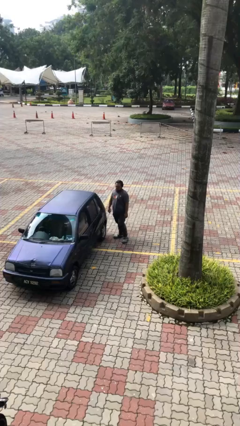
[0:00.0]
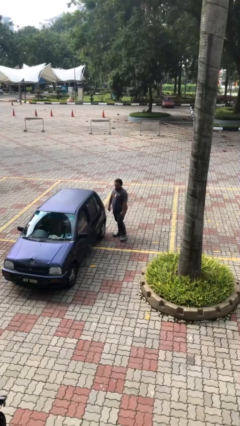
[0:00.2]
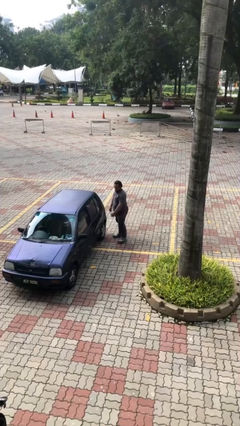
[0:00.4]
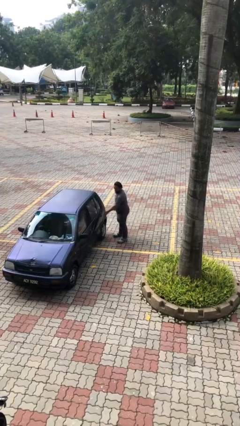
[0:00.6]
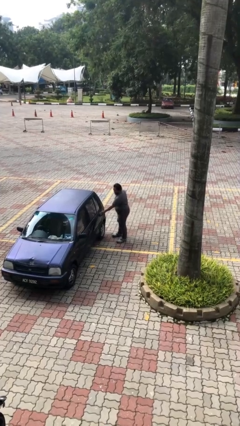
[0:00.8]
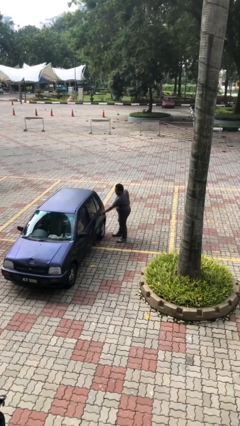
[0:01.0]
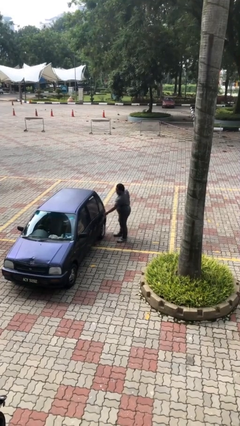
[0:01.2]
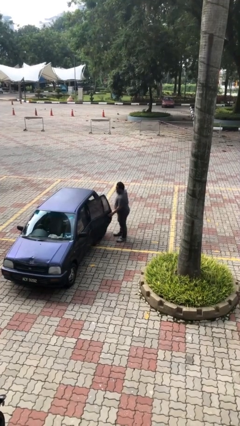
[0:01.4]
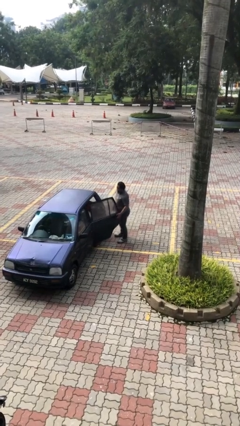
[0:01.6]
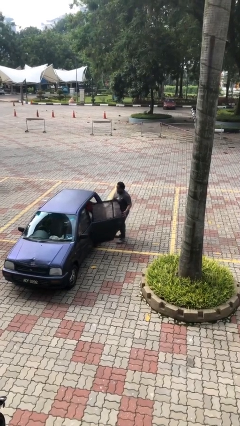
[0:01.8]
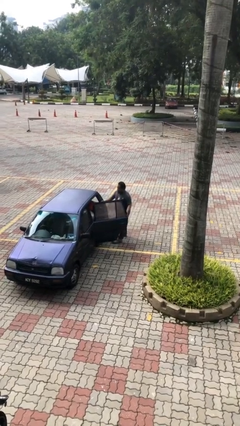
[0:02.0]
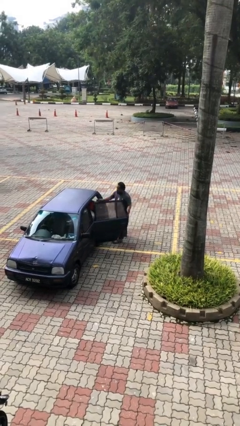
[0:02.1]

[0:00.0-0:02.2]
person opens car door

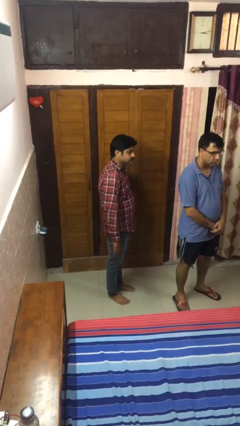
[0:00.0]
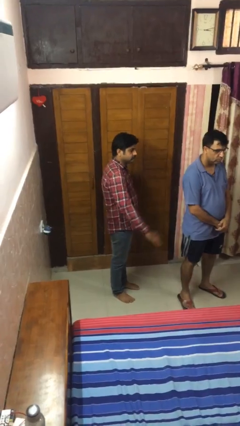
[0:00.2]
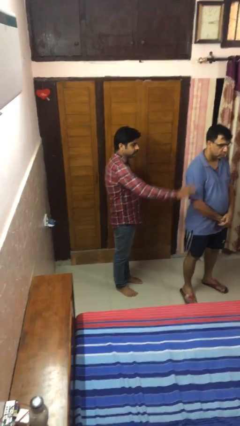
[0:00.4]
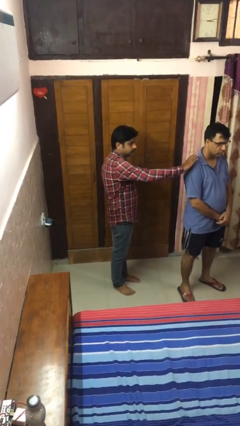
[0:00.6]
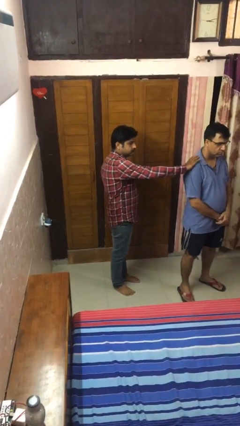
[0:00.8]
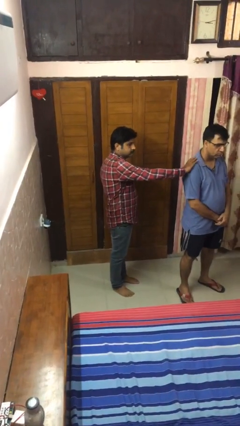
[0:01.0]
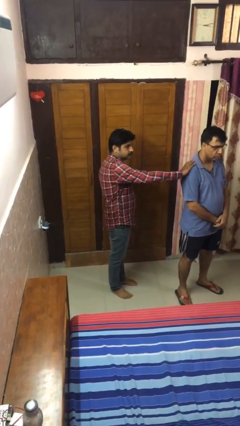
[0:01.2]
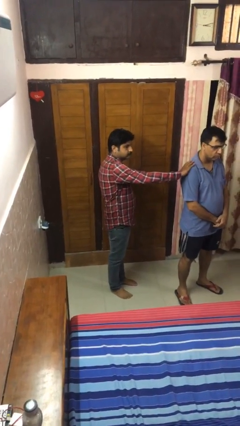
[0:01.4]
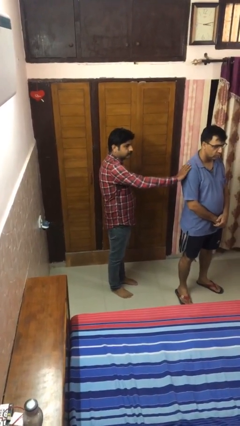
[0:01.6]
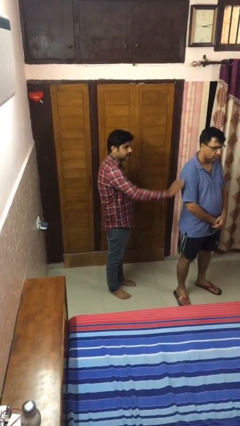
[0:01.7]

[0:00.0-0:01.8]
person touches back of person

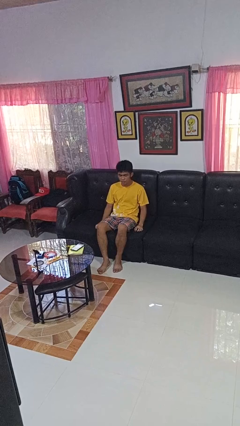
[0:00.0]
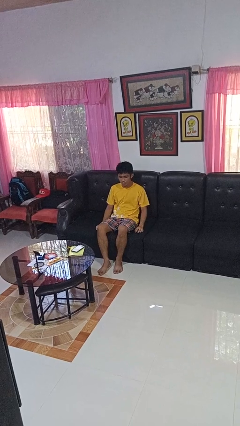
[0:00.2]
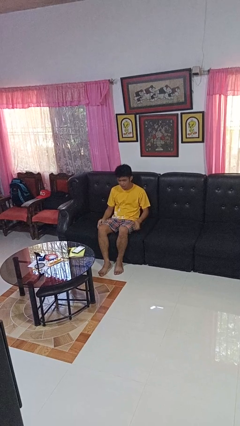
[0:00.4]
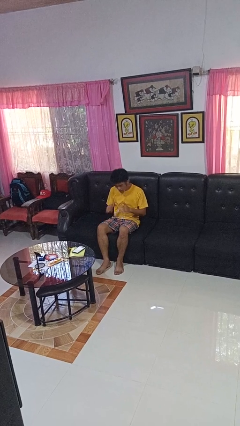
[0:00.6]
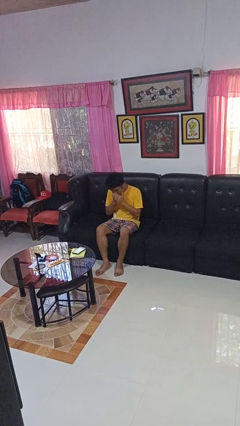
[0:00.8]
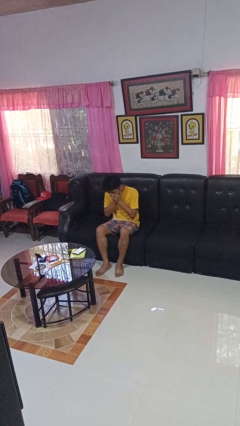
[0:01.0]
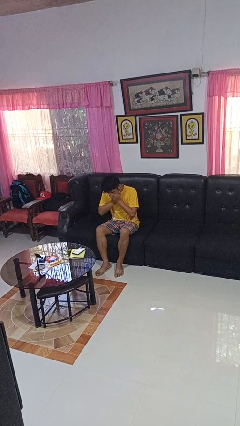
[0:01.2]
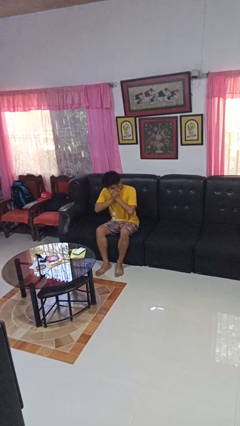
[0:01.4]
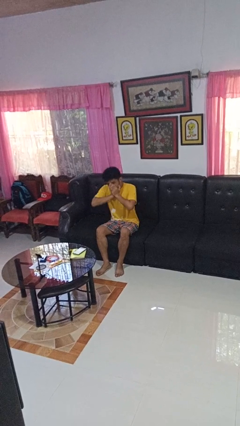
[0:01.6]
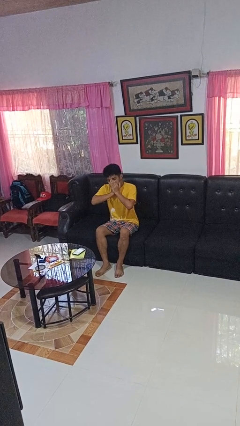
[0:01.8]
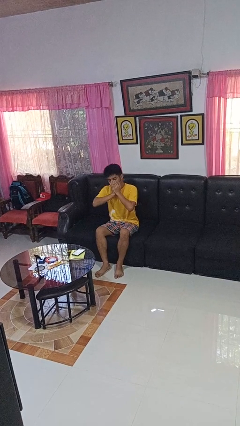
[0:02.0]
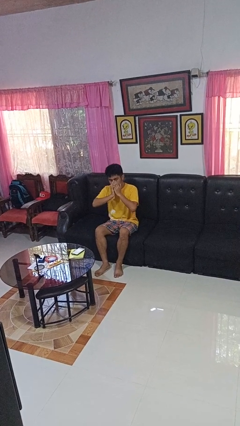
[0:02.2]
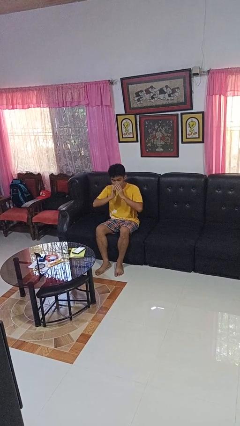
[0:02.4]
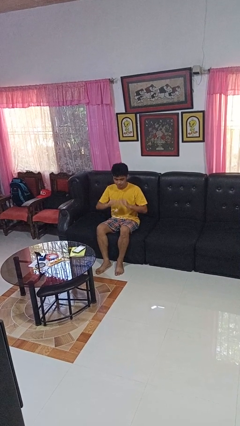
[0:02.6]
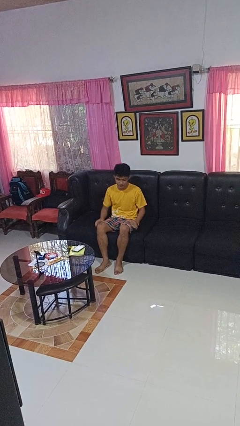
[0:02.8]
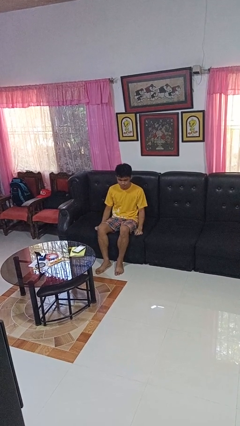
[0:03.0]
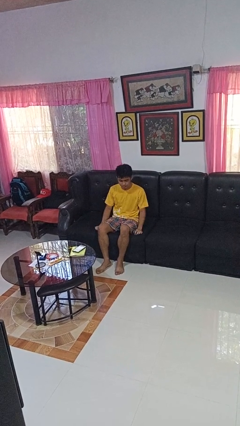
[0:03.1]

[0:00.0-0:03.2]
person yawns

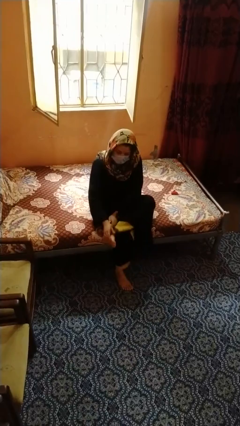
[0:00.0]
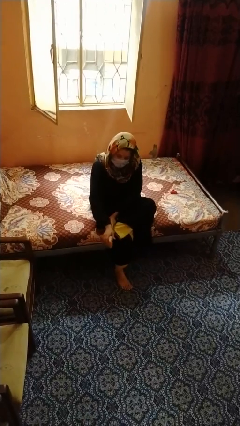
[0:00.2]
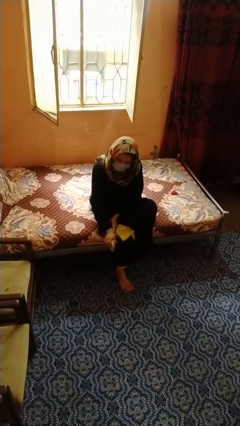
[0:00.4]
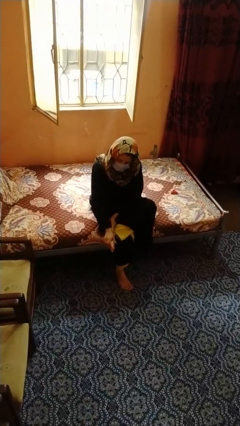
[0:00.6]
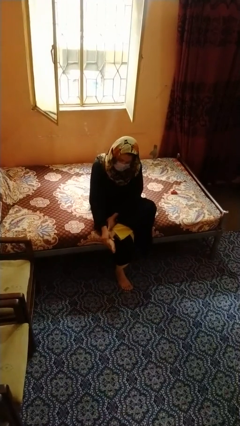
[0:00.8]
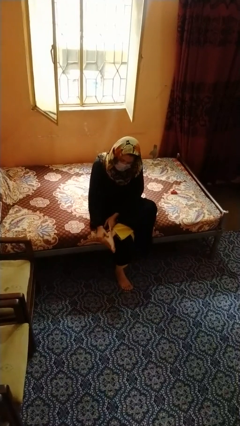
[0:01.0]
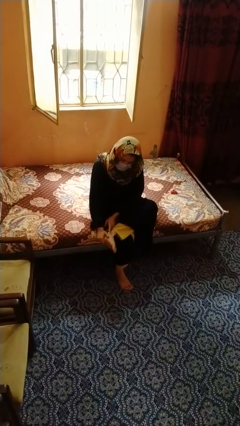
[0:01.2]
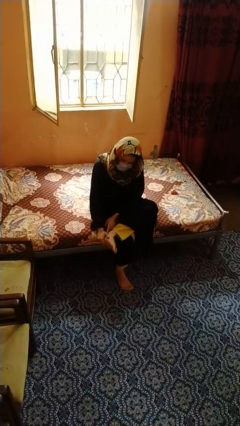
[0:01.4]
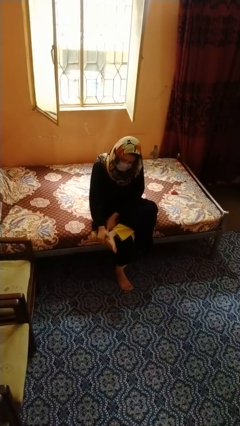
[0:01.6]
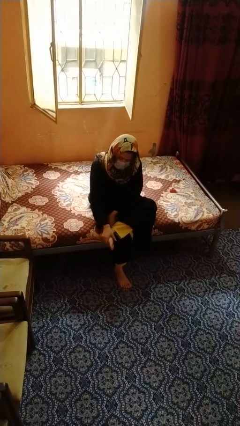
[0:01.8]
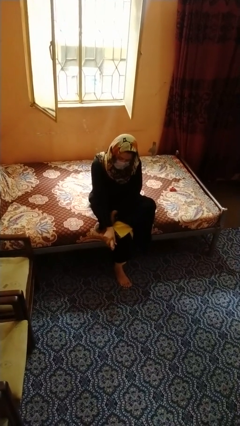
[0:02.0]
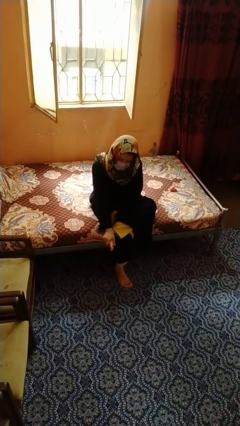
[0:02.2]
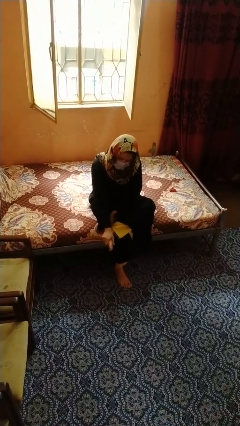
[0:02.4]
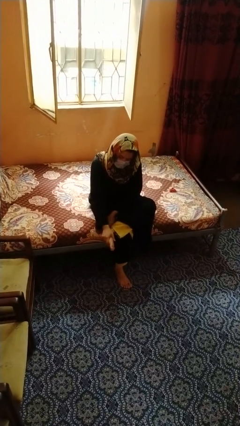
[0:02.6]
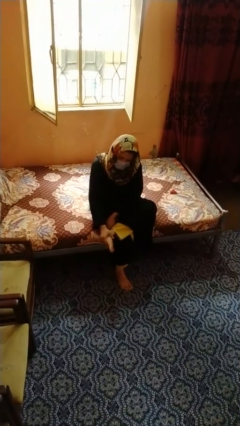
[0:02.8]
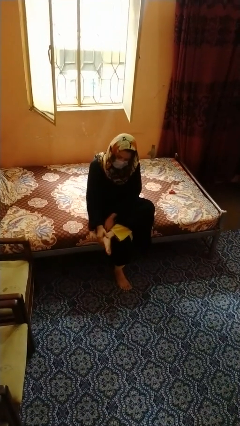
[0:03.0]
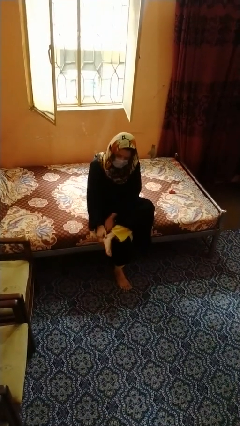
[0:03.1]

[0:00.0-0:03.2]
person rubs foot

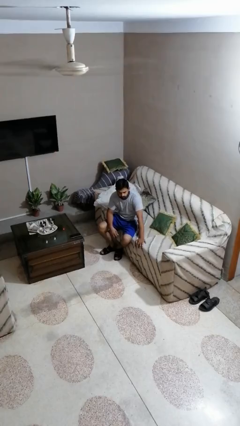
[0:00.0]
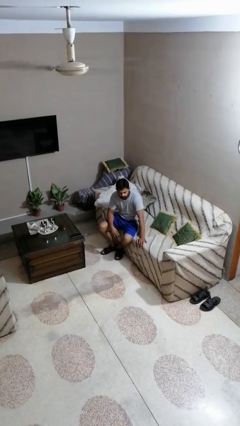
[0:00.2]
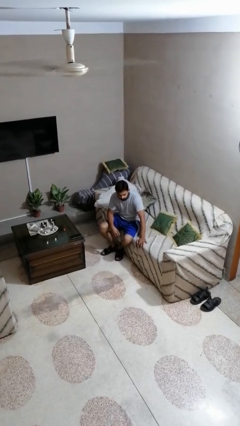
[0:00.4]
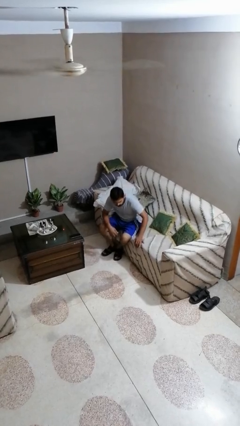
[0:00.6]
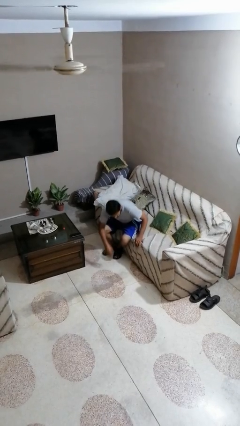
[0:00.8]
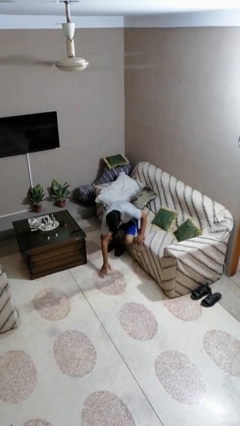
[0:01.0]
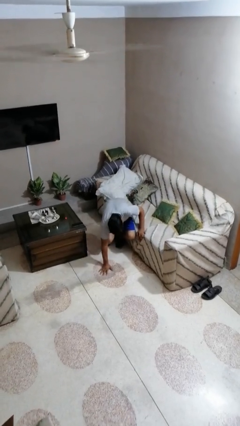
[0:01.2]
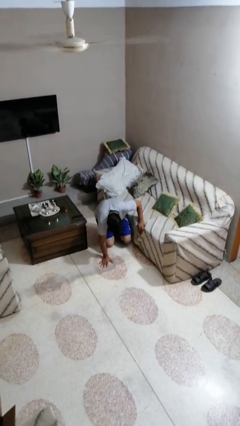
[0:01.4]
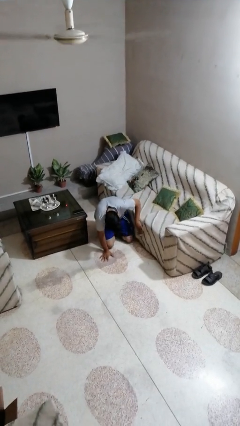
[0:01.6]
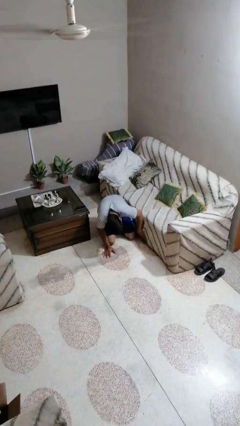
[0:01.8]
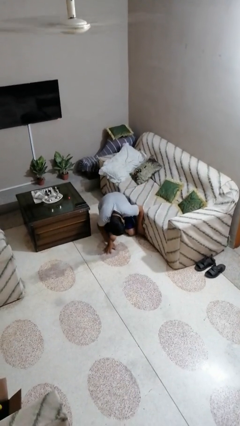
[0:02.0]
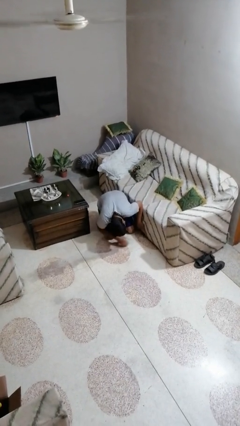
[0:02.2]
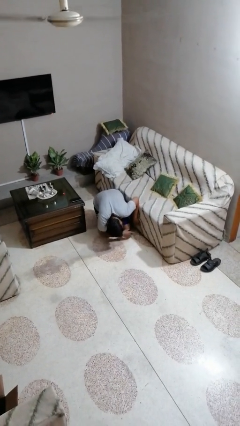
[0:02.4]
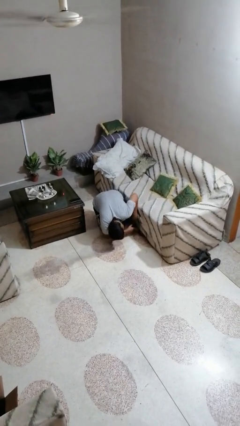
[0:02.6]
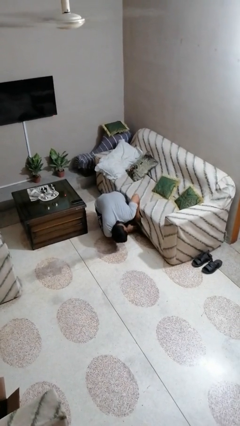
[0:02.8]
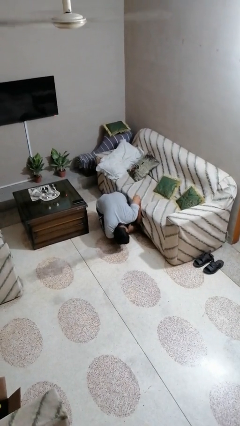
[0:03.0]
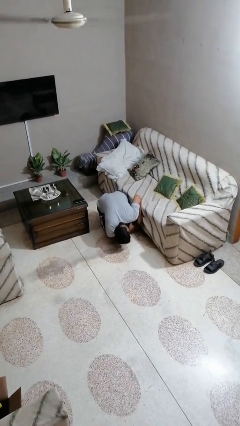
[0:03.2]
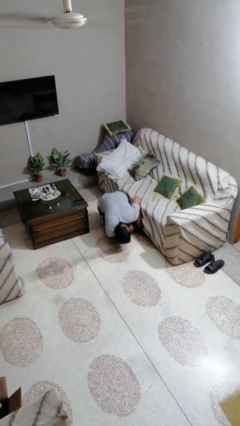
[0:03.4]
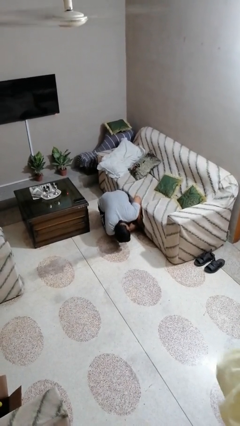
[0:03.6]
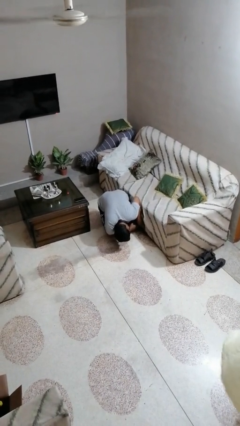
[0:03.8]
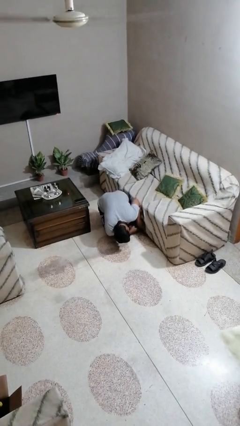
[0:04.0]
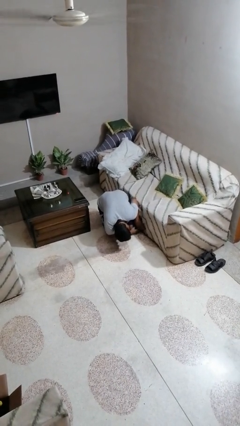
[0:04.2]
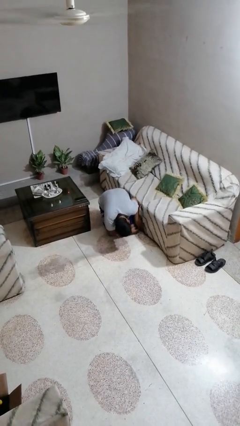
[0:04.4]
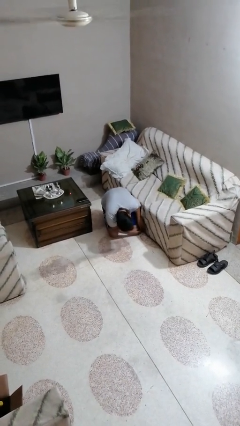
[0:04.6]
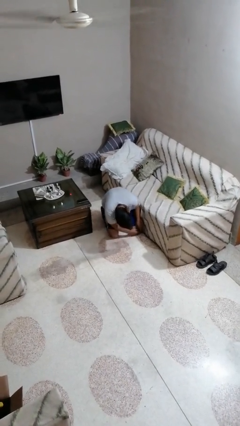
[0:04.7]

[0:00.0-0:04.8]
person searches under couch

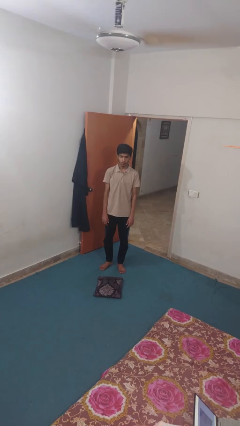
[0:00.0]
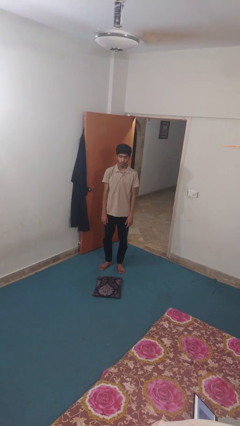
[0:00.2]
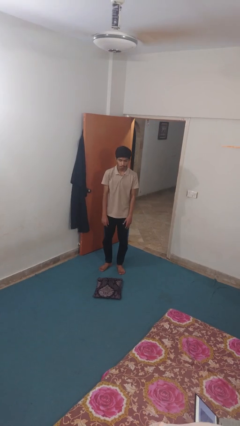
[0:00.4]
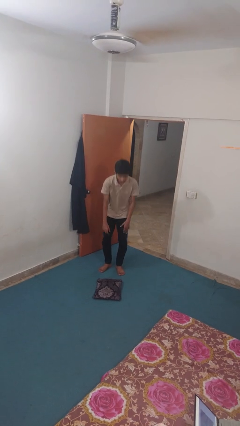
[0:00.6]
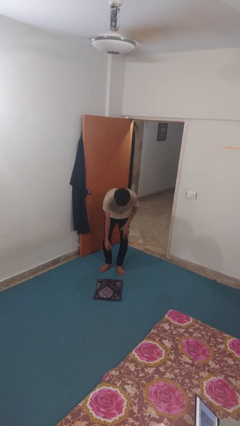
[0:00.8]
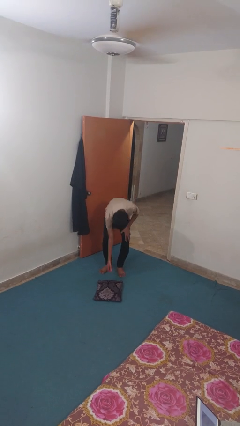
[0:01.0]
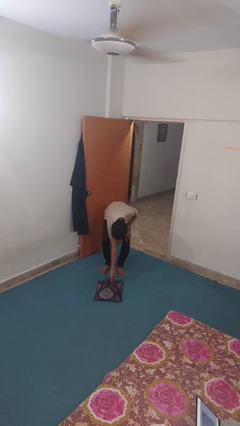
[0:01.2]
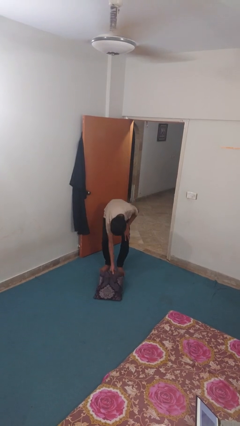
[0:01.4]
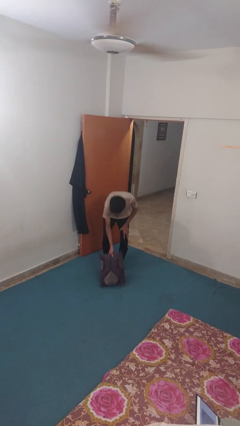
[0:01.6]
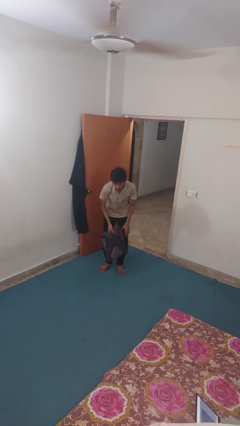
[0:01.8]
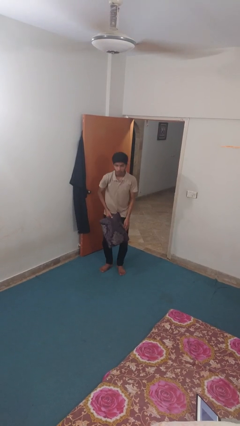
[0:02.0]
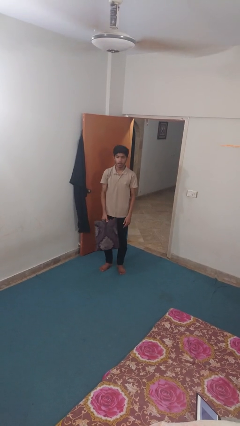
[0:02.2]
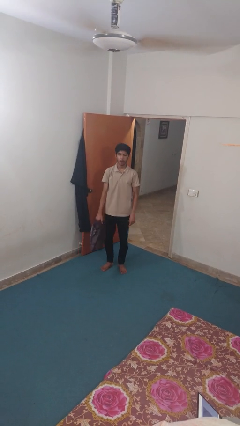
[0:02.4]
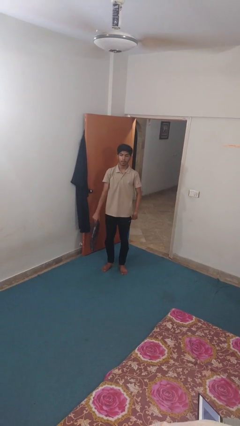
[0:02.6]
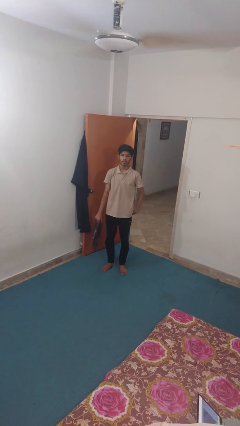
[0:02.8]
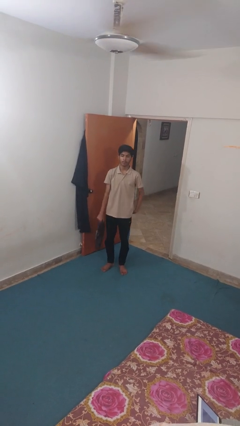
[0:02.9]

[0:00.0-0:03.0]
person picks up object from floor
